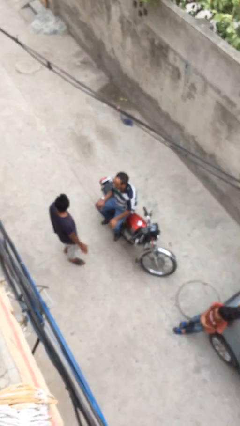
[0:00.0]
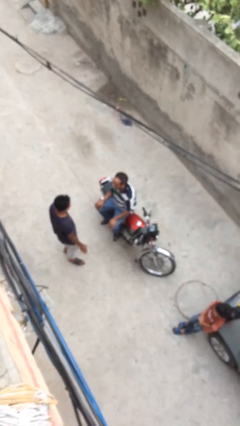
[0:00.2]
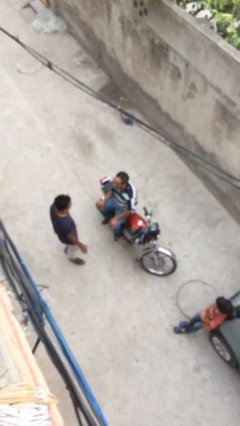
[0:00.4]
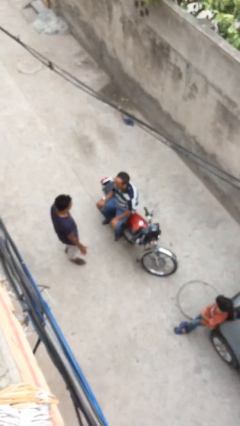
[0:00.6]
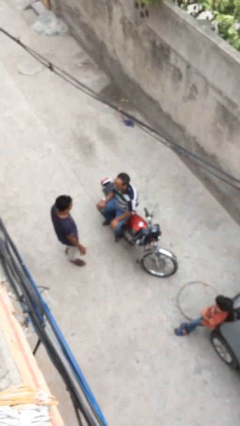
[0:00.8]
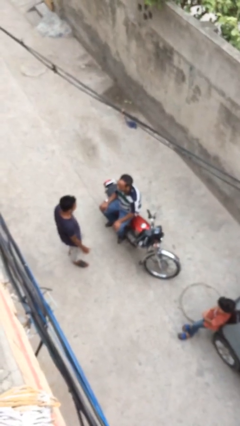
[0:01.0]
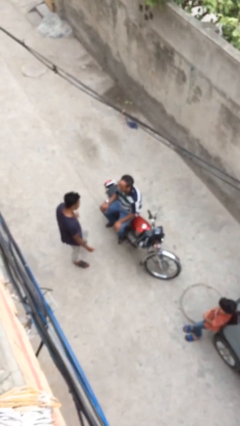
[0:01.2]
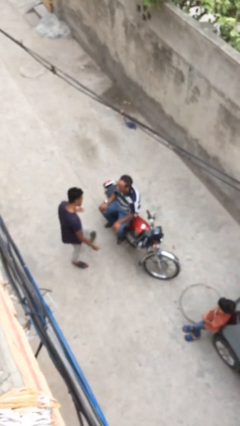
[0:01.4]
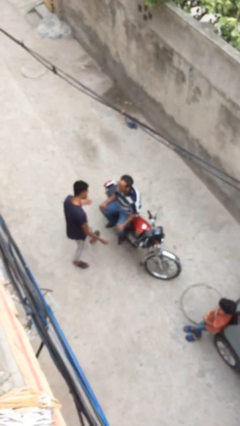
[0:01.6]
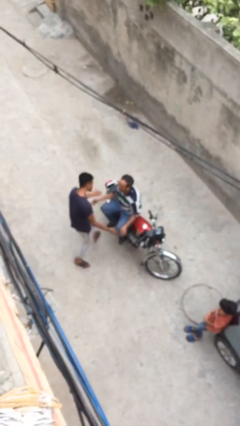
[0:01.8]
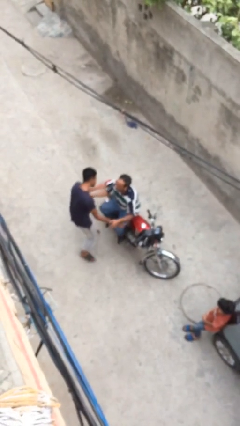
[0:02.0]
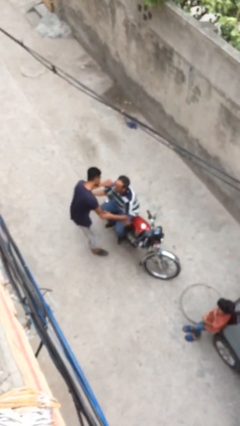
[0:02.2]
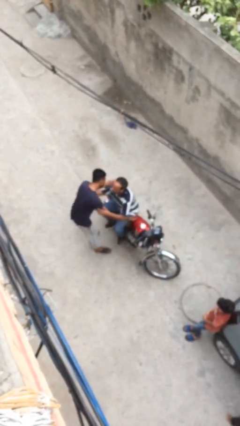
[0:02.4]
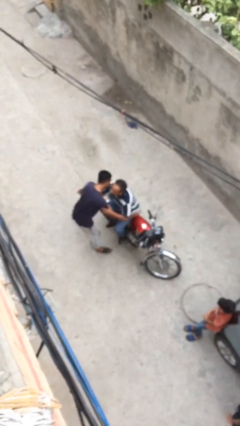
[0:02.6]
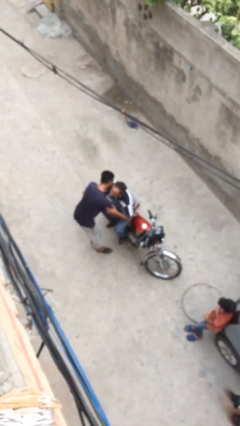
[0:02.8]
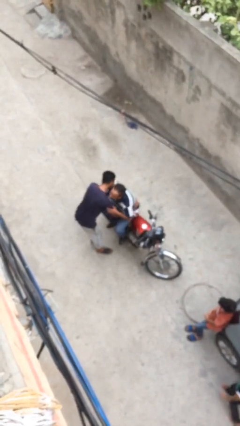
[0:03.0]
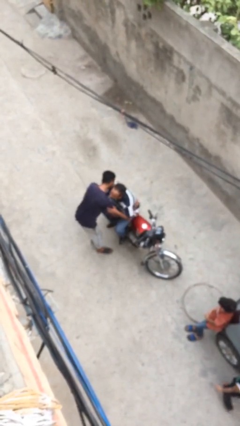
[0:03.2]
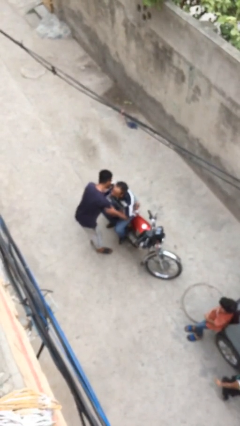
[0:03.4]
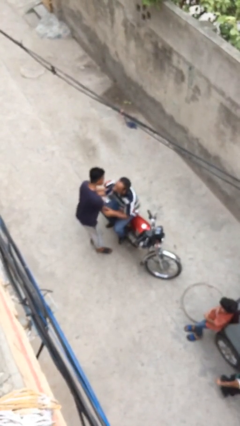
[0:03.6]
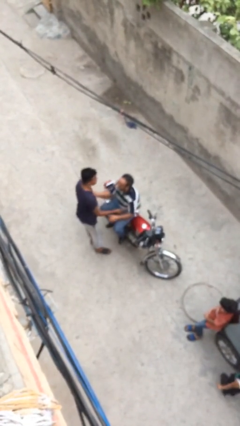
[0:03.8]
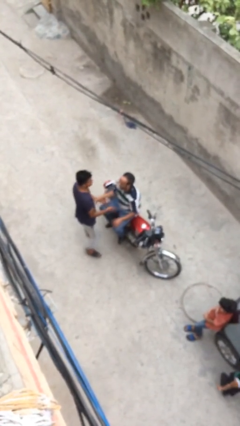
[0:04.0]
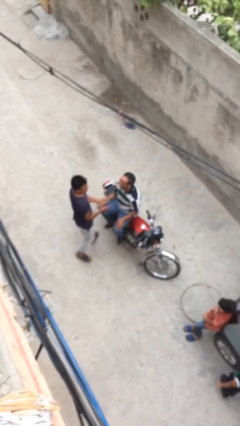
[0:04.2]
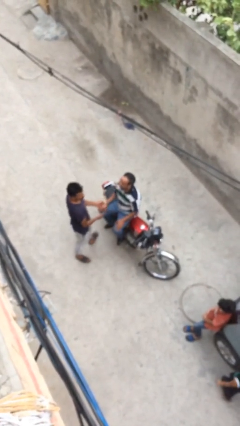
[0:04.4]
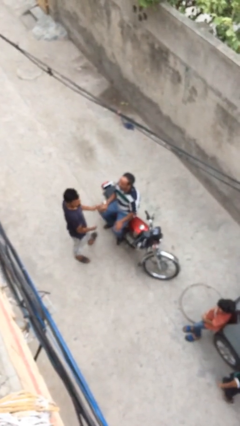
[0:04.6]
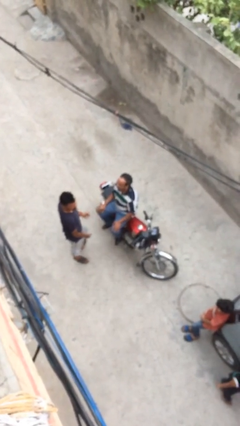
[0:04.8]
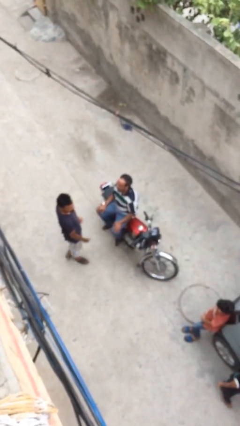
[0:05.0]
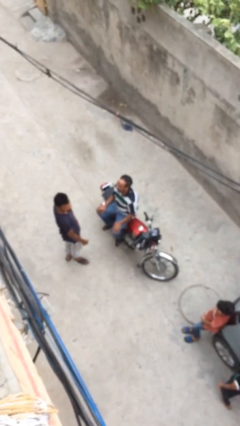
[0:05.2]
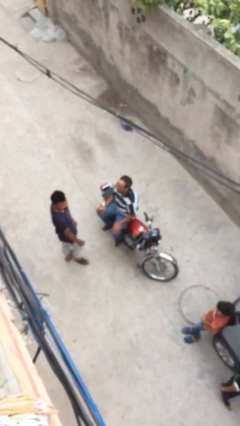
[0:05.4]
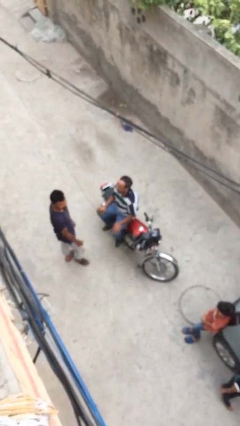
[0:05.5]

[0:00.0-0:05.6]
person embraces person

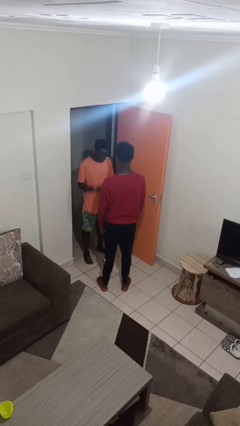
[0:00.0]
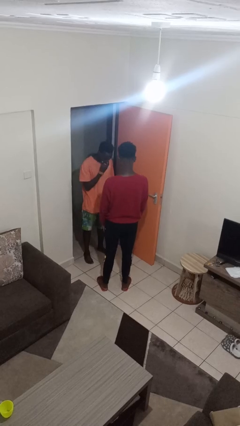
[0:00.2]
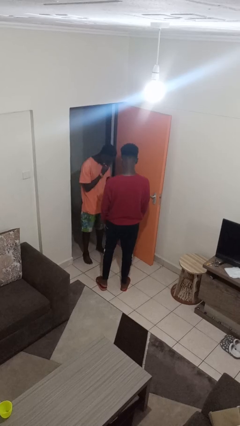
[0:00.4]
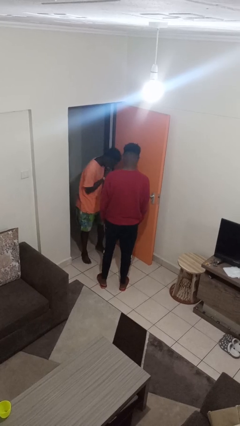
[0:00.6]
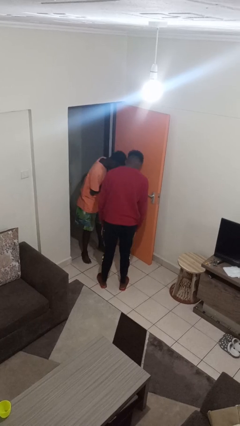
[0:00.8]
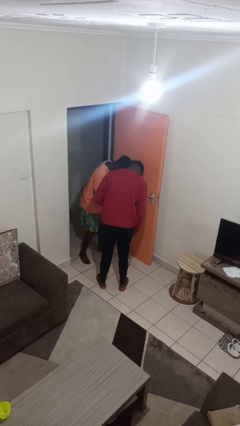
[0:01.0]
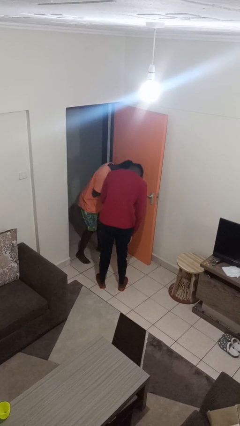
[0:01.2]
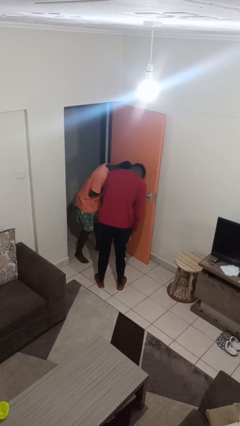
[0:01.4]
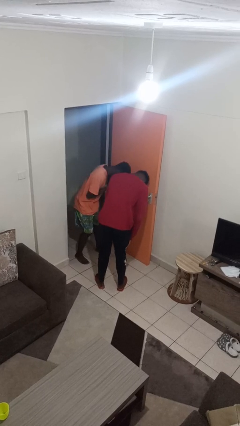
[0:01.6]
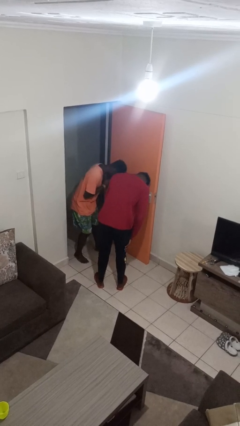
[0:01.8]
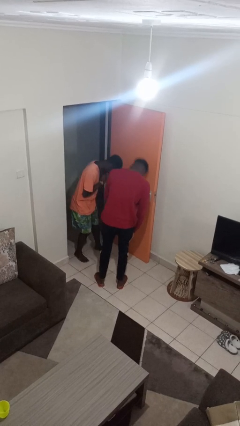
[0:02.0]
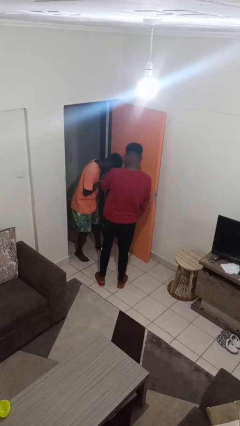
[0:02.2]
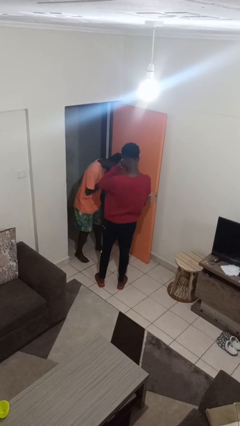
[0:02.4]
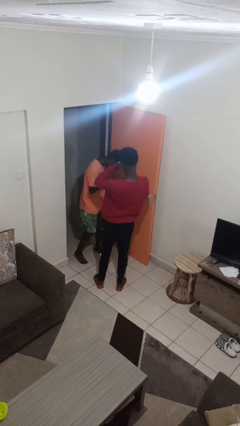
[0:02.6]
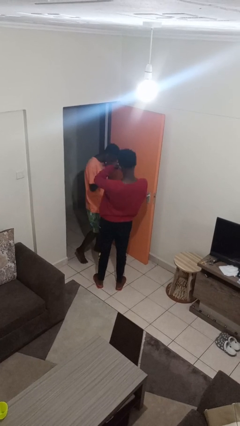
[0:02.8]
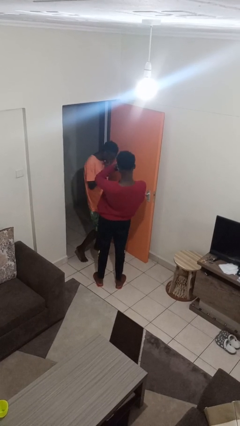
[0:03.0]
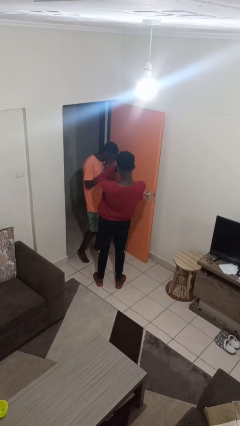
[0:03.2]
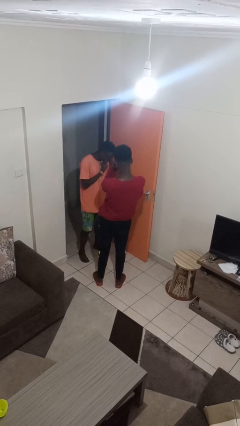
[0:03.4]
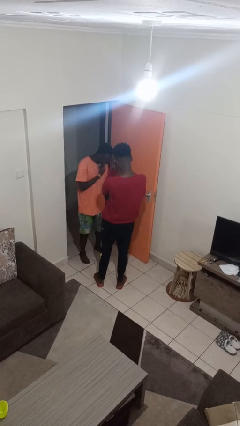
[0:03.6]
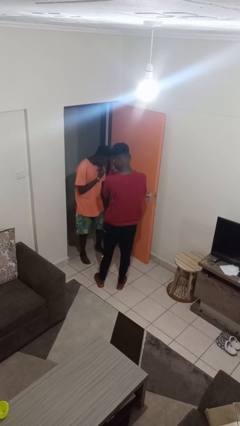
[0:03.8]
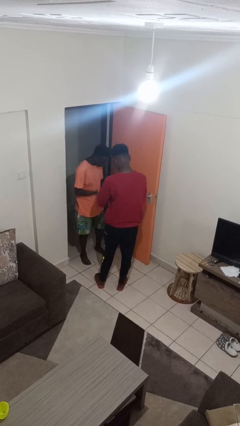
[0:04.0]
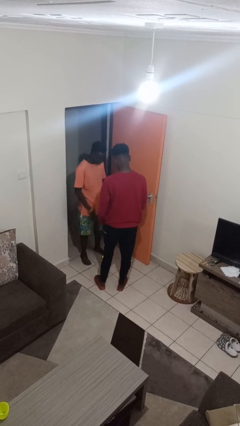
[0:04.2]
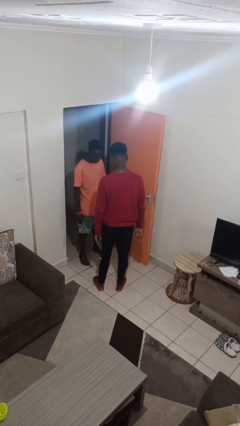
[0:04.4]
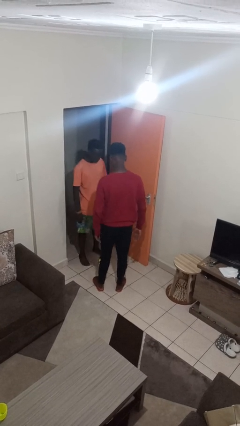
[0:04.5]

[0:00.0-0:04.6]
person laughs with person

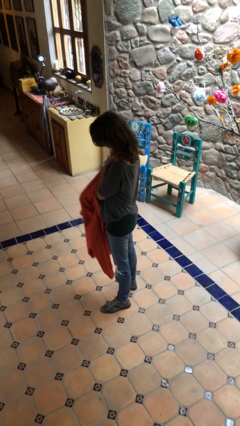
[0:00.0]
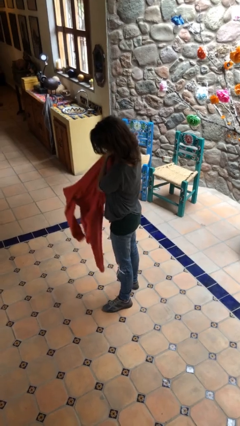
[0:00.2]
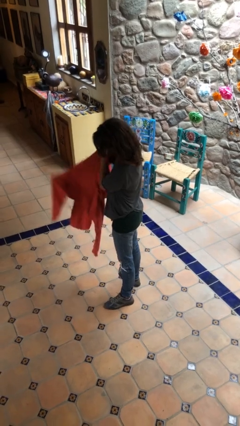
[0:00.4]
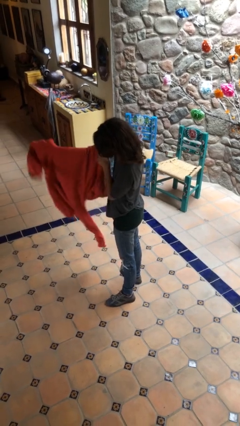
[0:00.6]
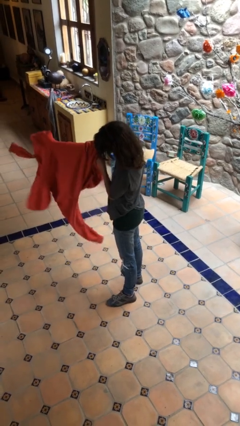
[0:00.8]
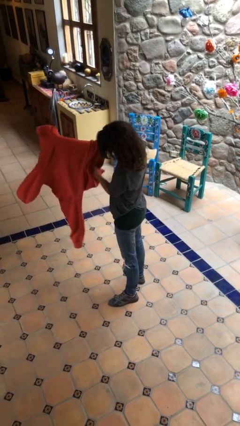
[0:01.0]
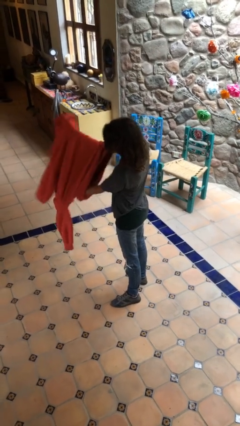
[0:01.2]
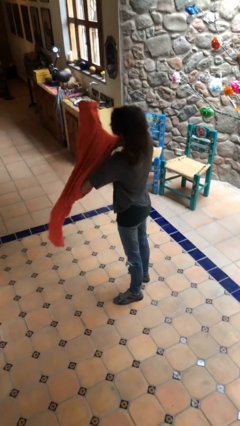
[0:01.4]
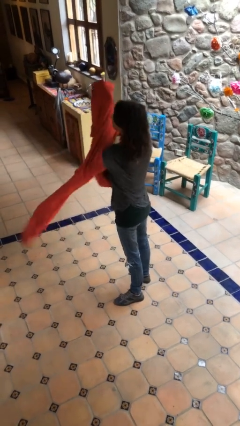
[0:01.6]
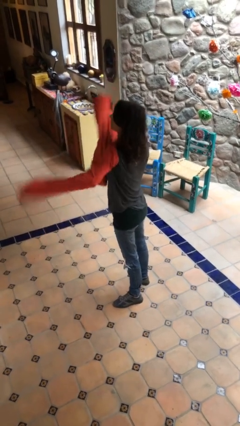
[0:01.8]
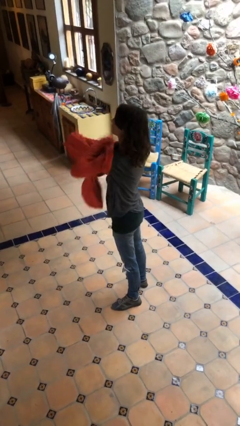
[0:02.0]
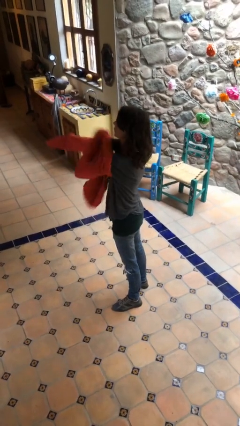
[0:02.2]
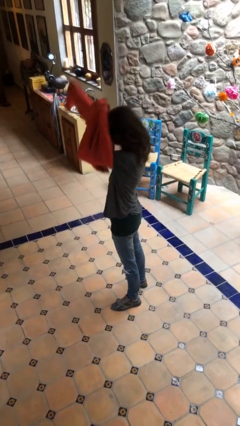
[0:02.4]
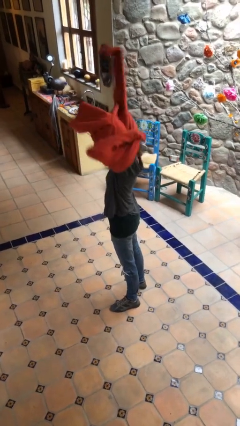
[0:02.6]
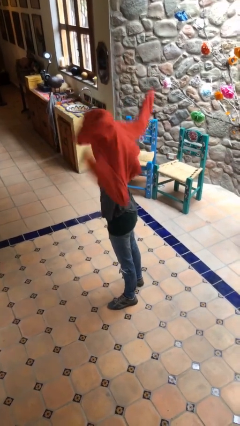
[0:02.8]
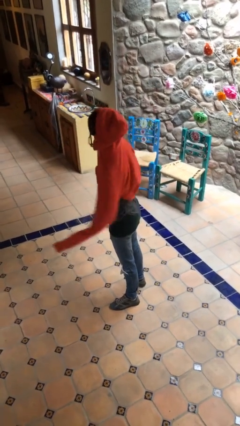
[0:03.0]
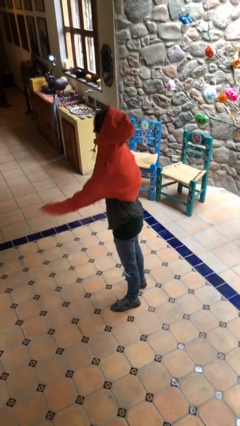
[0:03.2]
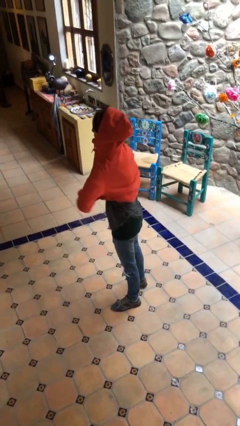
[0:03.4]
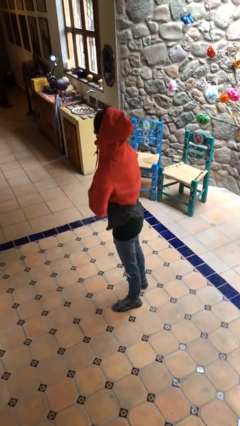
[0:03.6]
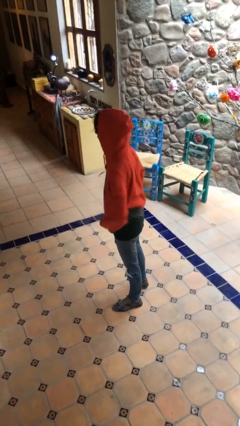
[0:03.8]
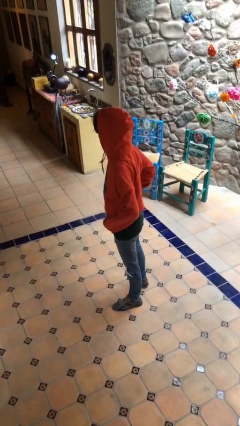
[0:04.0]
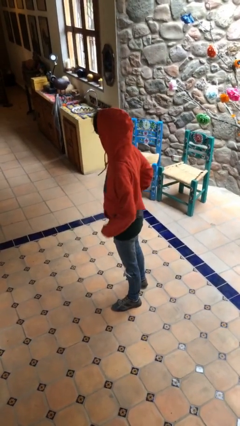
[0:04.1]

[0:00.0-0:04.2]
person puts on hoodie

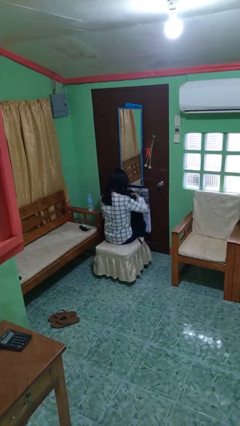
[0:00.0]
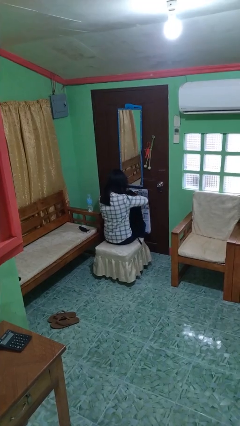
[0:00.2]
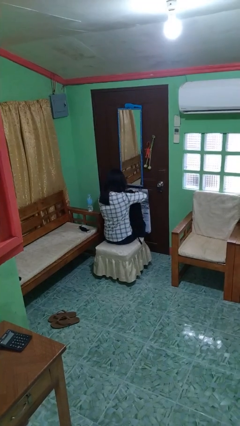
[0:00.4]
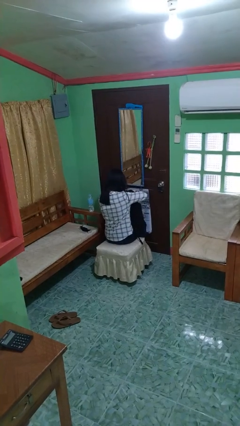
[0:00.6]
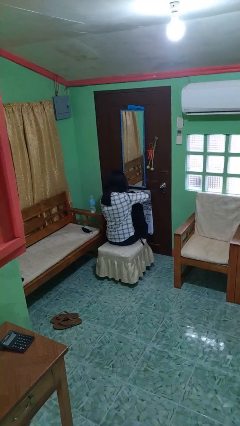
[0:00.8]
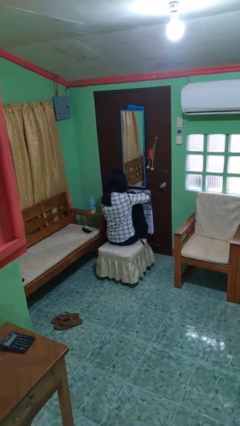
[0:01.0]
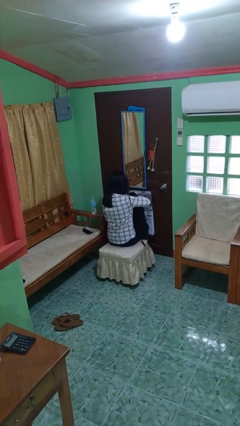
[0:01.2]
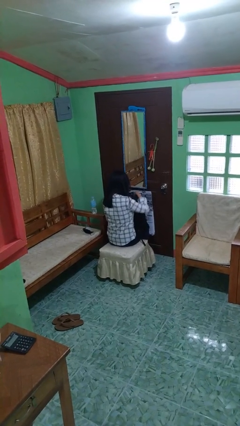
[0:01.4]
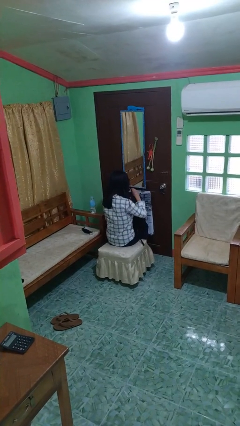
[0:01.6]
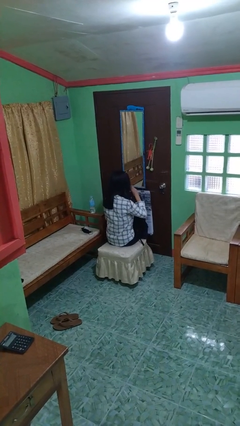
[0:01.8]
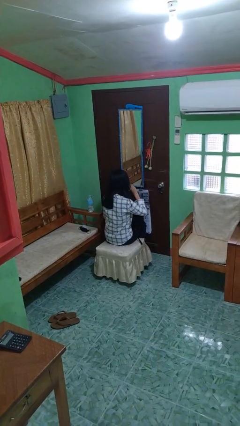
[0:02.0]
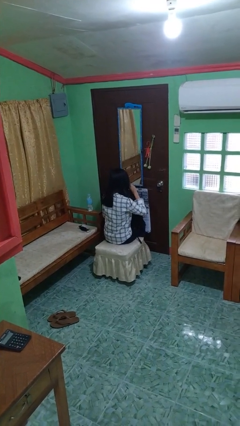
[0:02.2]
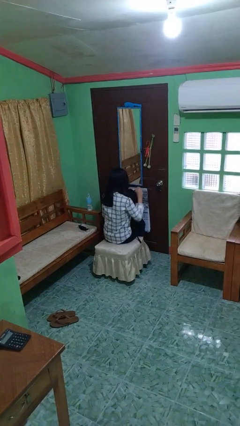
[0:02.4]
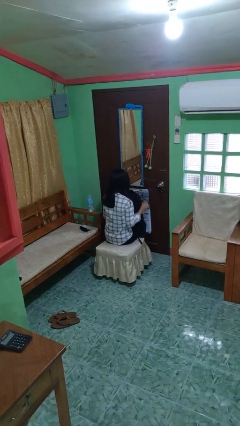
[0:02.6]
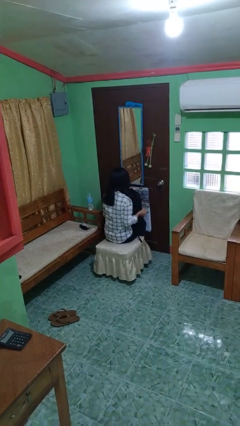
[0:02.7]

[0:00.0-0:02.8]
person eats snack from bag
